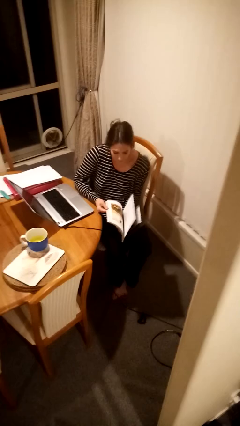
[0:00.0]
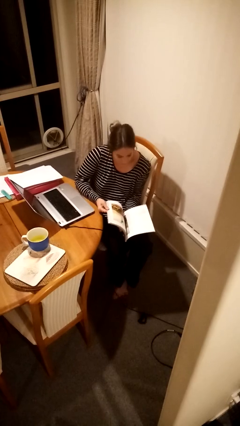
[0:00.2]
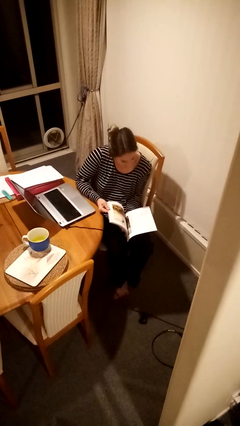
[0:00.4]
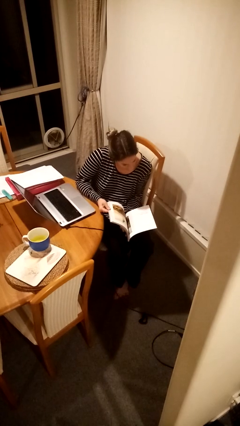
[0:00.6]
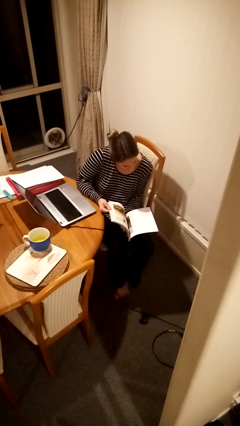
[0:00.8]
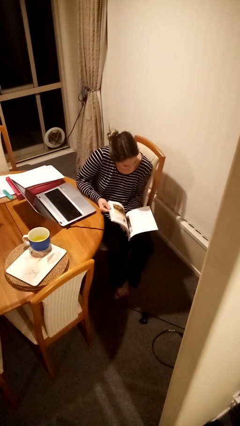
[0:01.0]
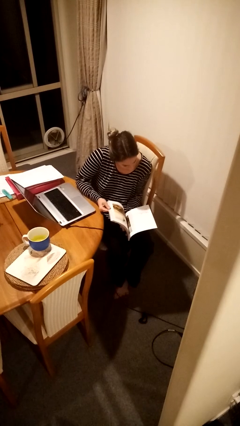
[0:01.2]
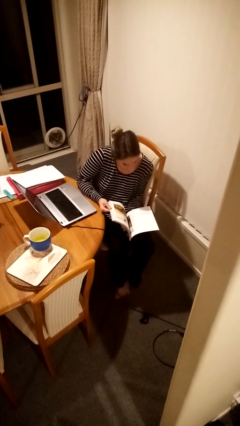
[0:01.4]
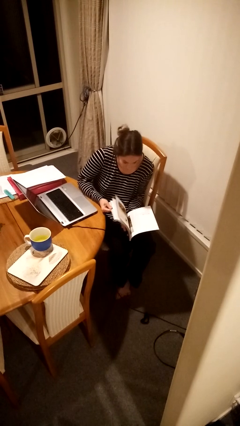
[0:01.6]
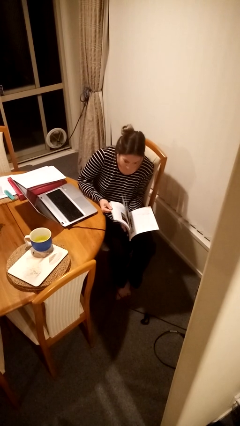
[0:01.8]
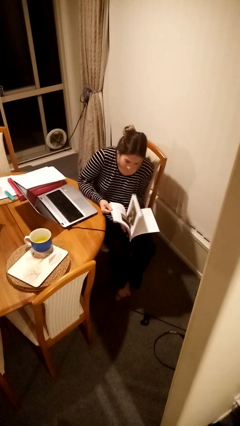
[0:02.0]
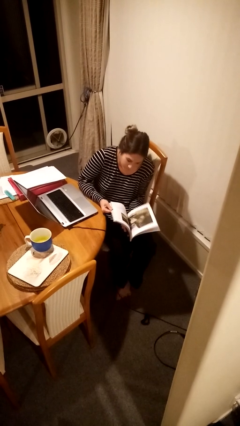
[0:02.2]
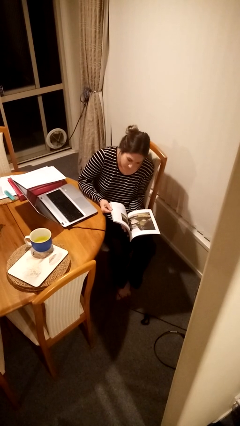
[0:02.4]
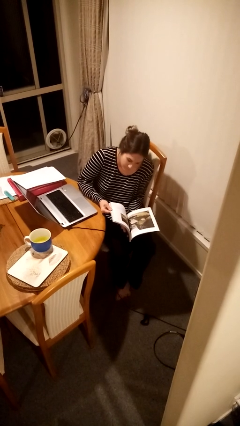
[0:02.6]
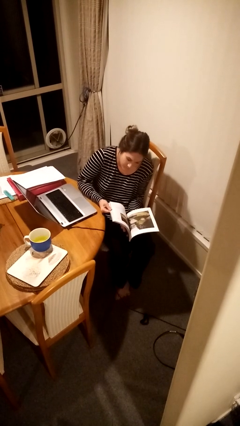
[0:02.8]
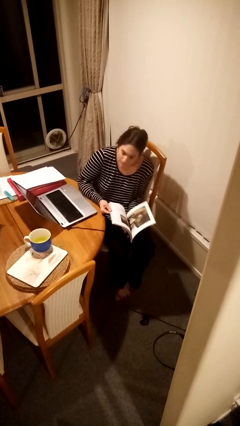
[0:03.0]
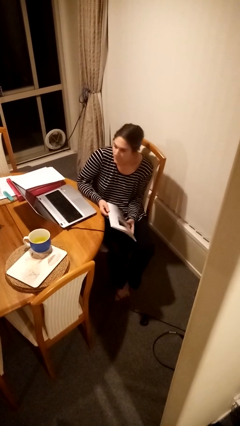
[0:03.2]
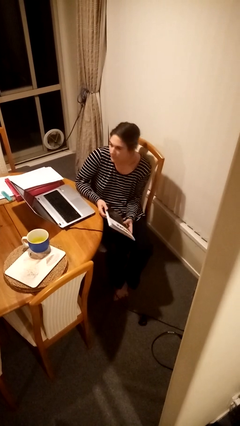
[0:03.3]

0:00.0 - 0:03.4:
person reads magazine

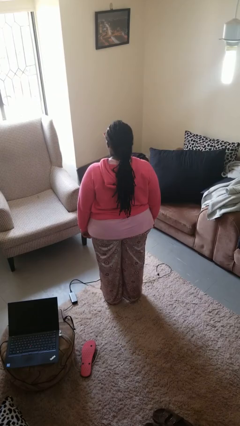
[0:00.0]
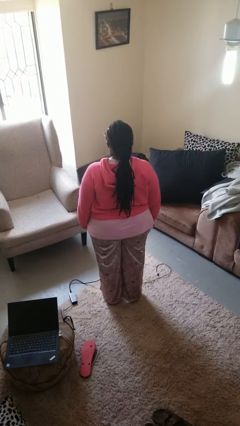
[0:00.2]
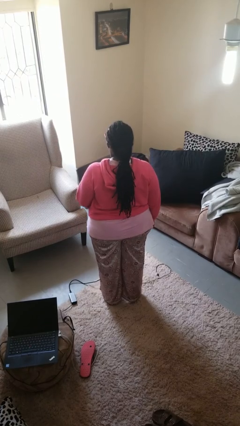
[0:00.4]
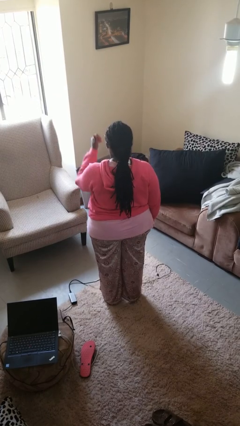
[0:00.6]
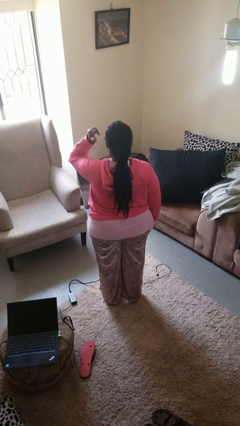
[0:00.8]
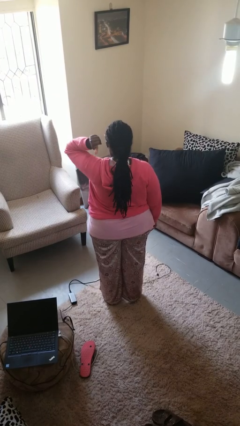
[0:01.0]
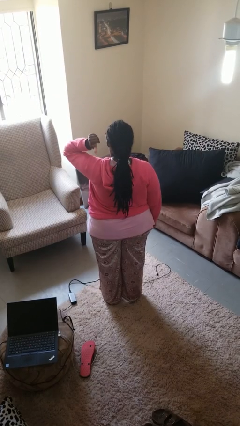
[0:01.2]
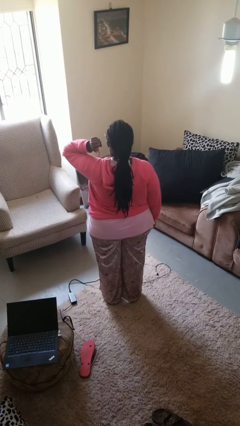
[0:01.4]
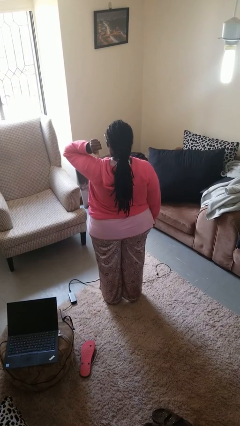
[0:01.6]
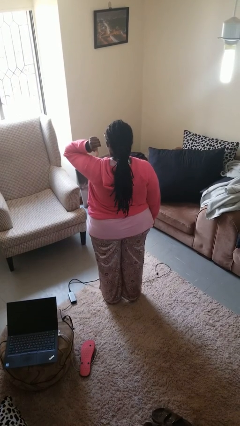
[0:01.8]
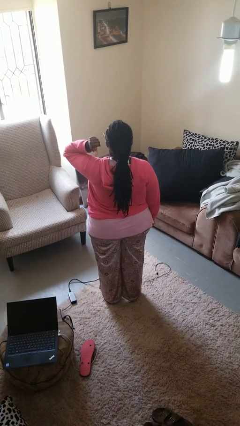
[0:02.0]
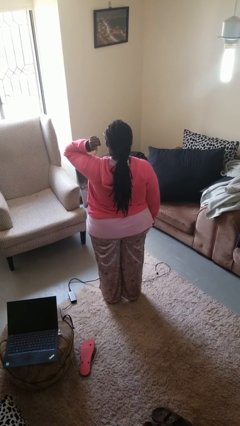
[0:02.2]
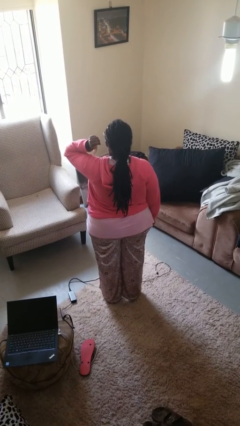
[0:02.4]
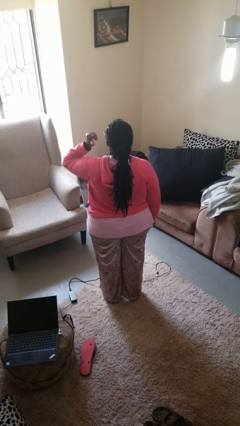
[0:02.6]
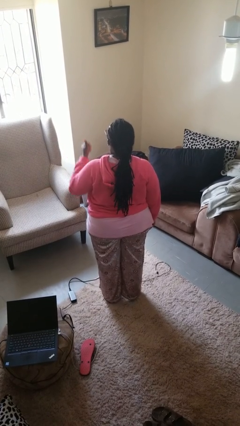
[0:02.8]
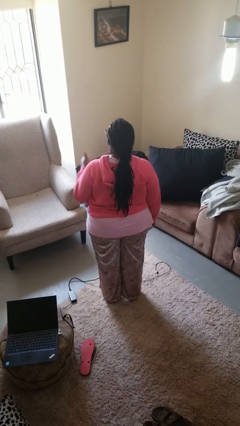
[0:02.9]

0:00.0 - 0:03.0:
person gestures behind me

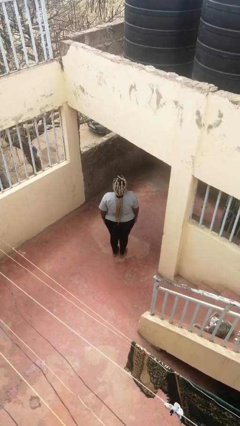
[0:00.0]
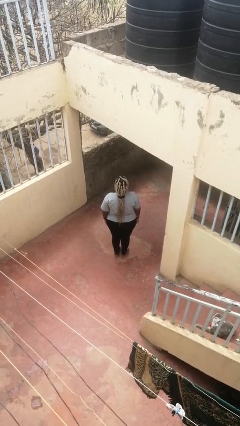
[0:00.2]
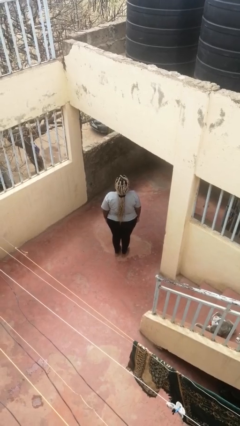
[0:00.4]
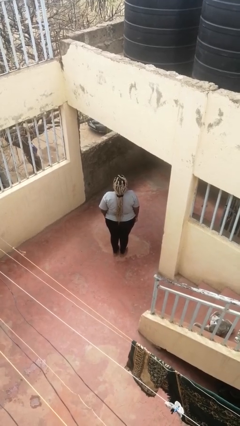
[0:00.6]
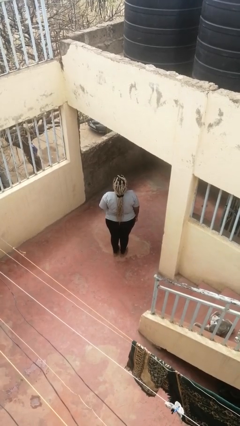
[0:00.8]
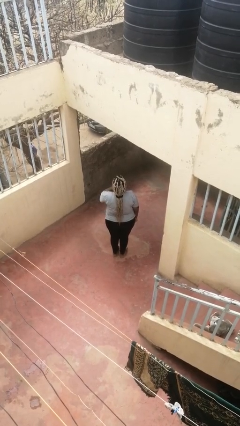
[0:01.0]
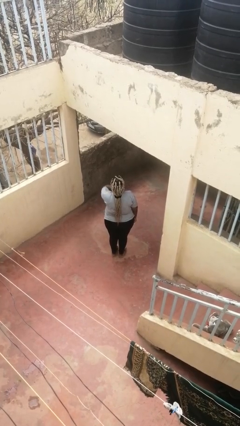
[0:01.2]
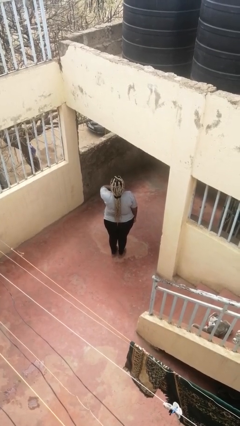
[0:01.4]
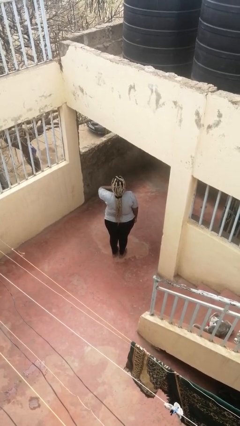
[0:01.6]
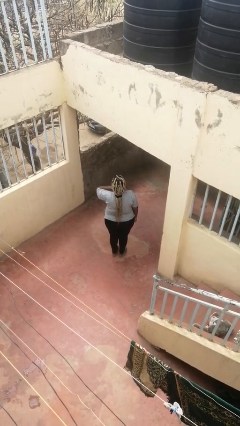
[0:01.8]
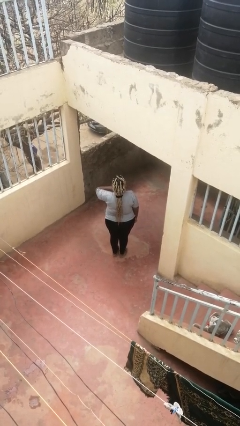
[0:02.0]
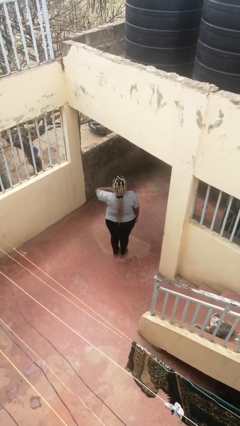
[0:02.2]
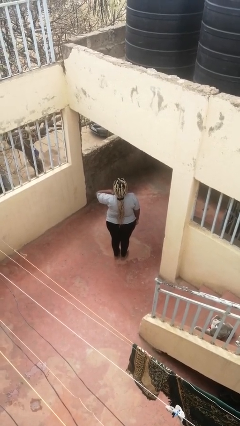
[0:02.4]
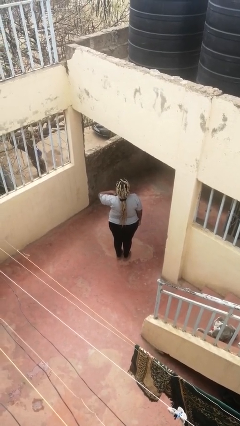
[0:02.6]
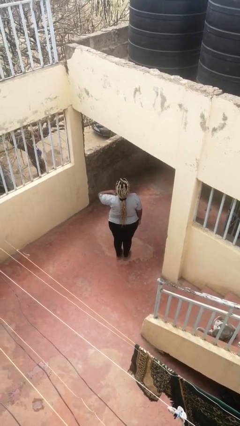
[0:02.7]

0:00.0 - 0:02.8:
person gestures cut

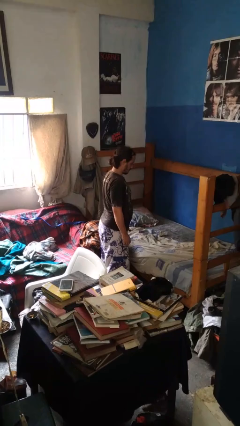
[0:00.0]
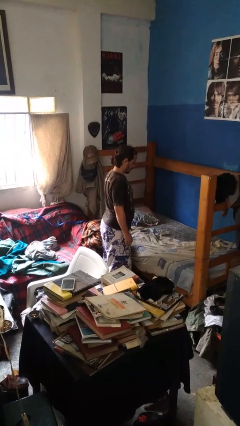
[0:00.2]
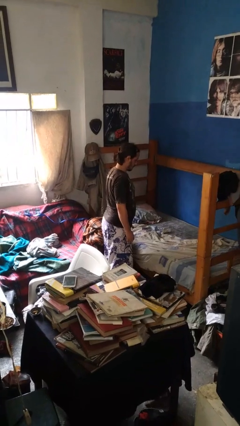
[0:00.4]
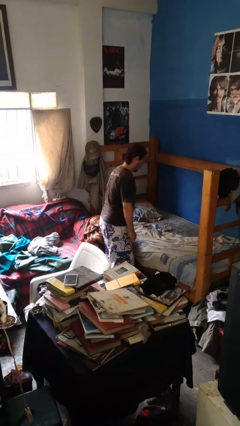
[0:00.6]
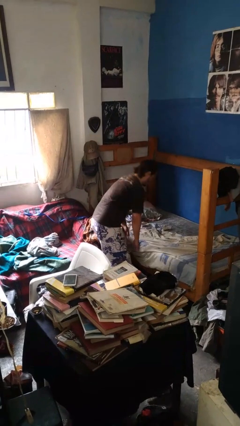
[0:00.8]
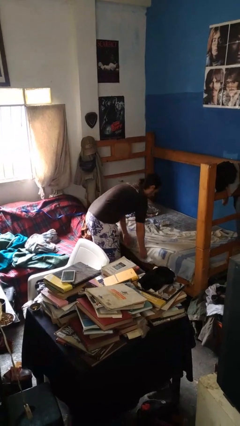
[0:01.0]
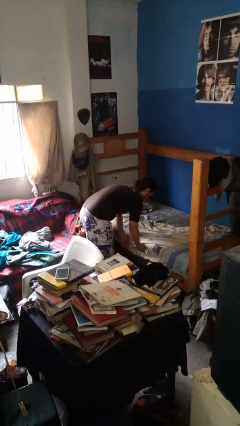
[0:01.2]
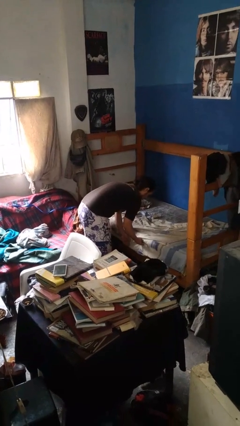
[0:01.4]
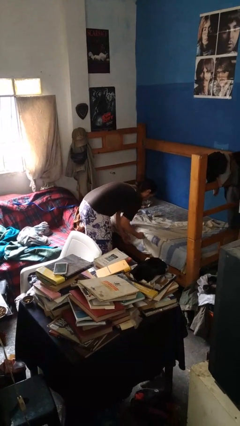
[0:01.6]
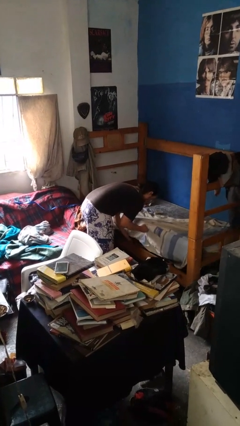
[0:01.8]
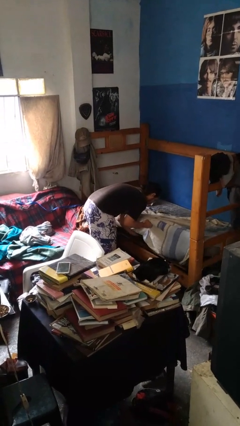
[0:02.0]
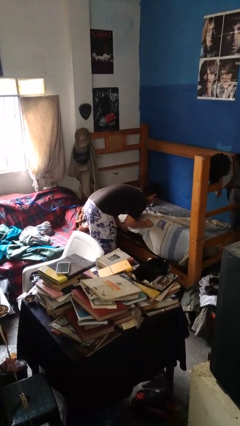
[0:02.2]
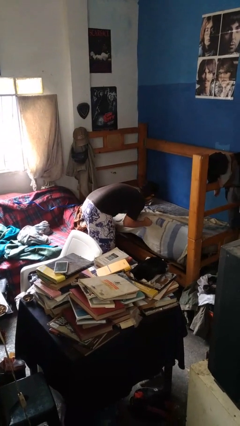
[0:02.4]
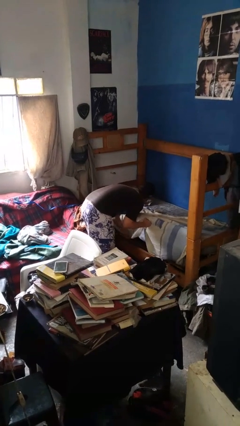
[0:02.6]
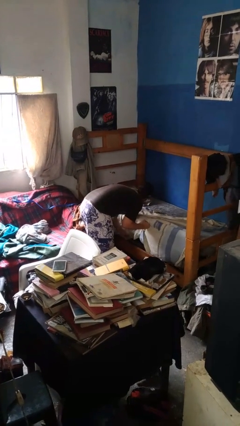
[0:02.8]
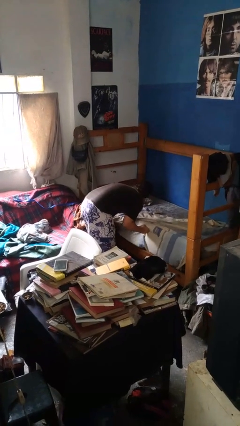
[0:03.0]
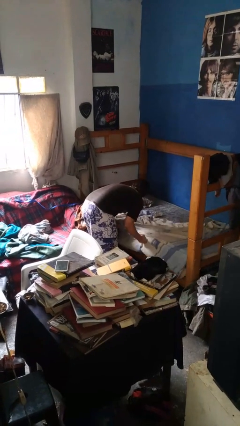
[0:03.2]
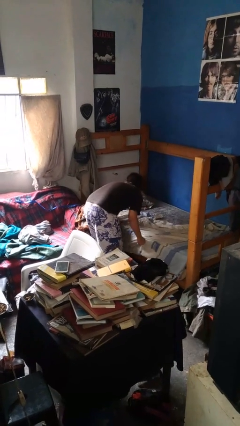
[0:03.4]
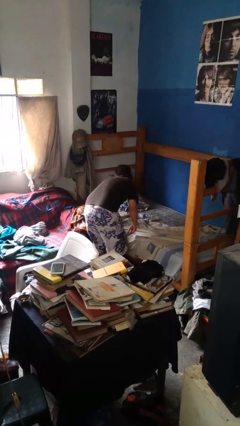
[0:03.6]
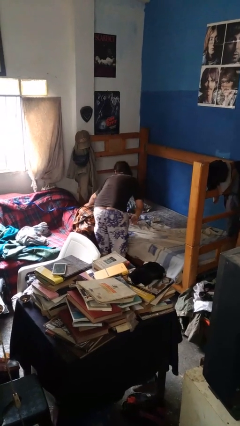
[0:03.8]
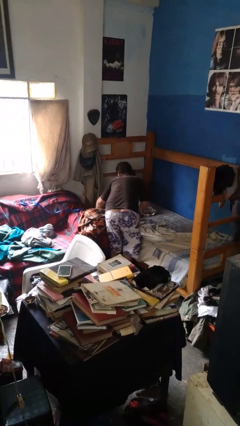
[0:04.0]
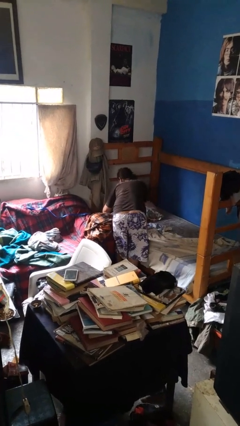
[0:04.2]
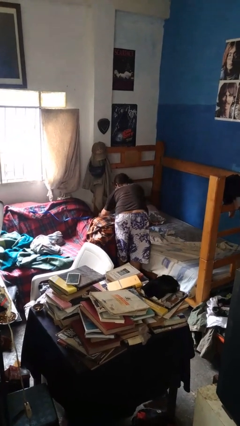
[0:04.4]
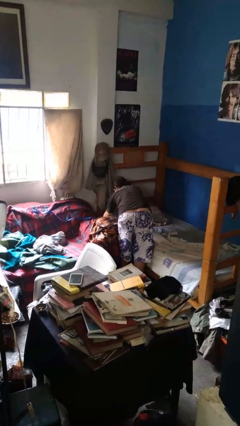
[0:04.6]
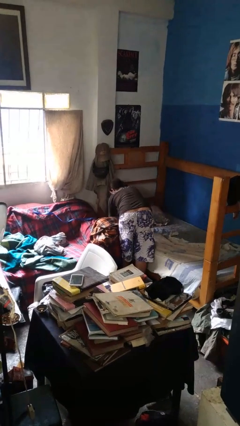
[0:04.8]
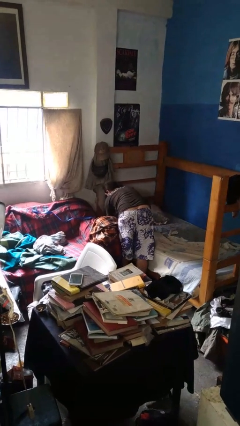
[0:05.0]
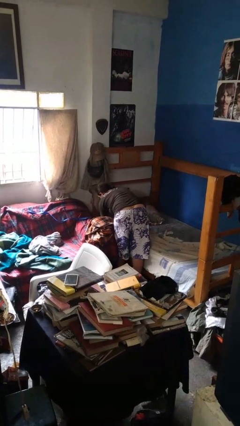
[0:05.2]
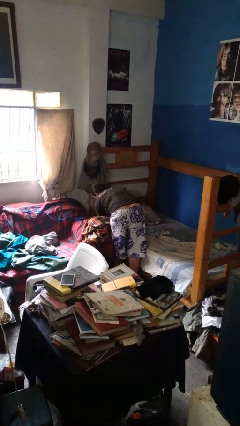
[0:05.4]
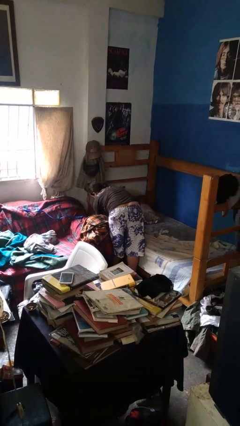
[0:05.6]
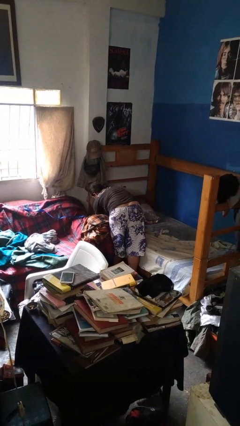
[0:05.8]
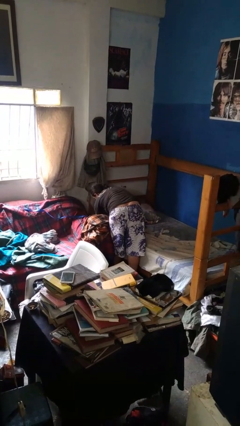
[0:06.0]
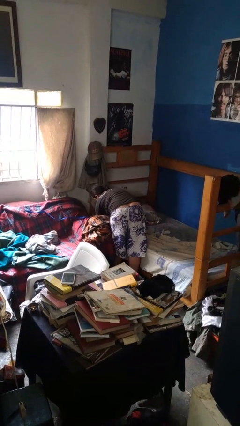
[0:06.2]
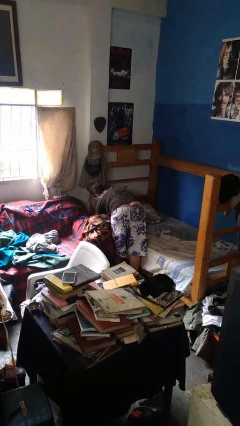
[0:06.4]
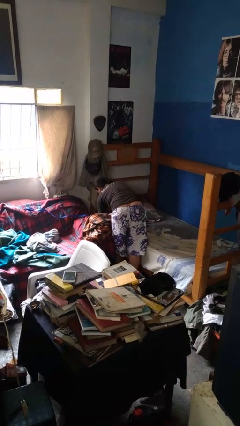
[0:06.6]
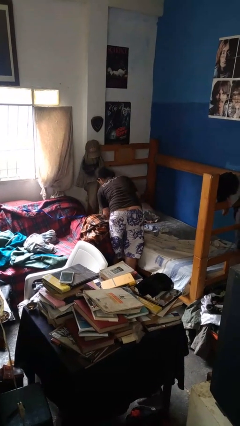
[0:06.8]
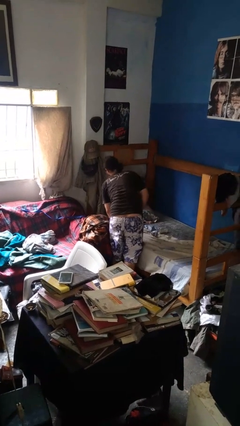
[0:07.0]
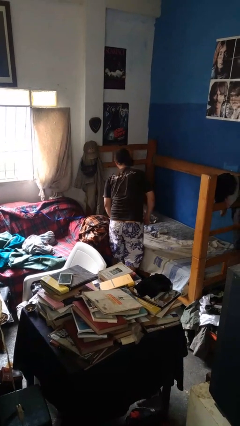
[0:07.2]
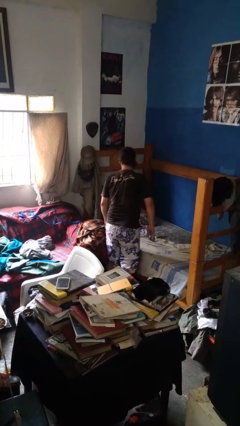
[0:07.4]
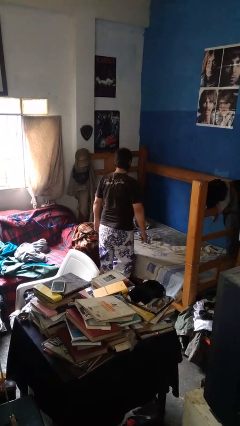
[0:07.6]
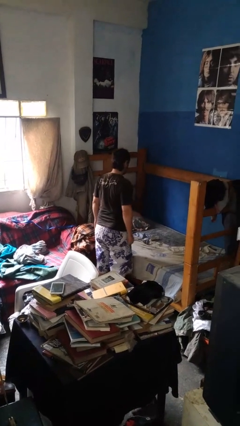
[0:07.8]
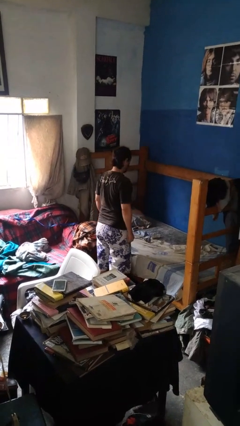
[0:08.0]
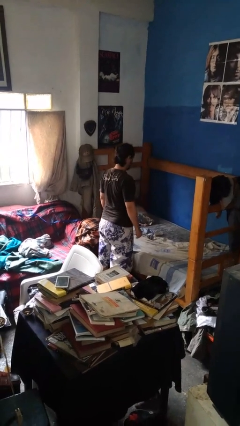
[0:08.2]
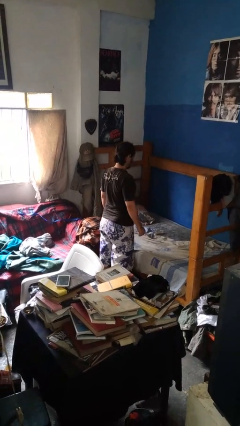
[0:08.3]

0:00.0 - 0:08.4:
person makes bed

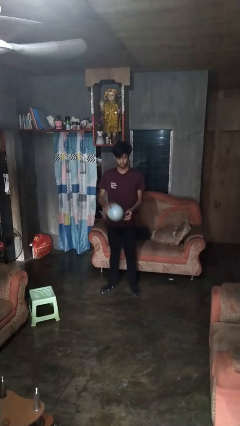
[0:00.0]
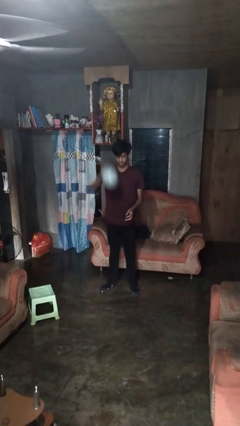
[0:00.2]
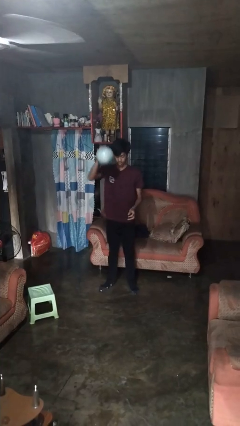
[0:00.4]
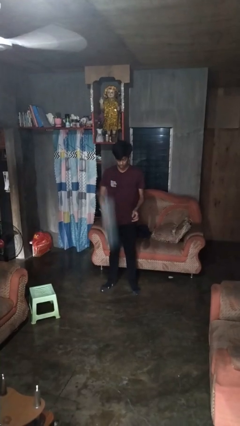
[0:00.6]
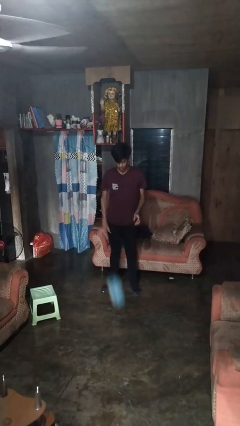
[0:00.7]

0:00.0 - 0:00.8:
person bounces ball on floor
